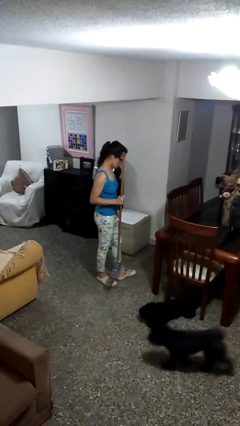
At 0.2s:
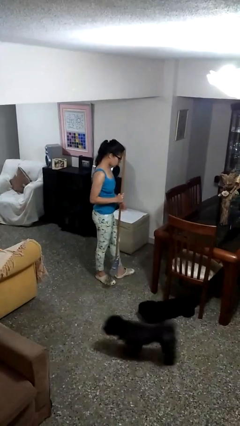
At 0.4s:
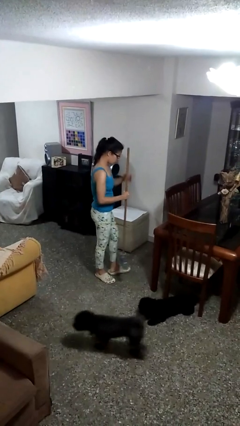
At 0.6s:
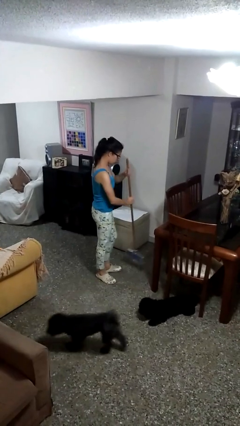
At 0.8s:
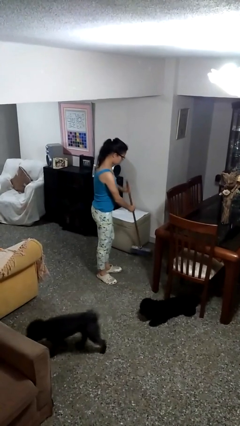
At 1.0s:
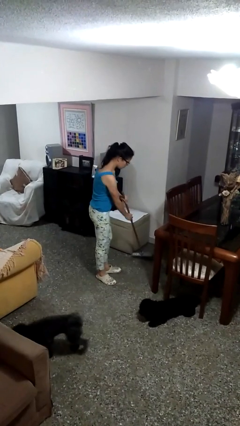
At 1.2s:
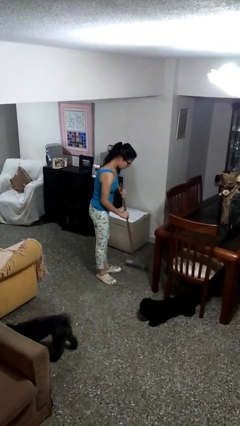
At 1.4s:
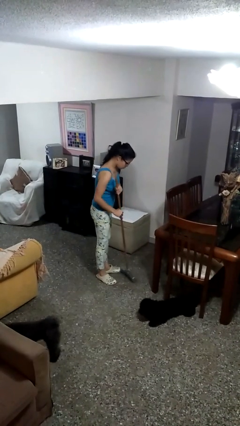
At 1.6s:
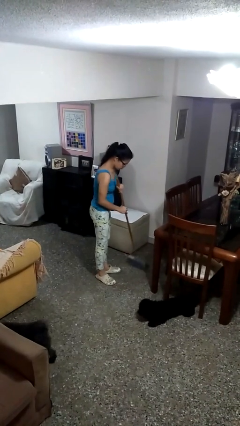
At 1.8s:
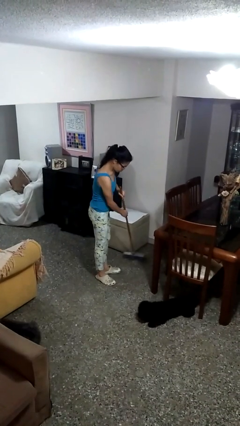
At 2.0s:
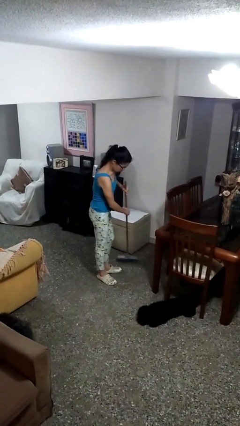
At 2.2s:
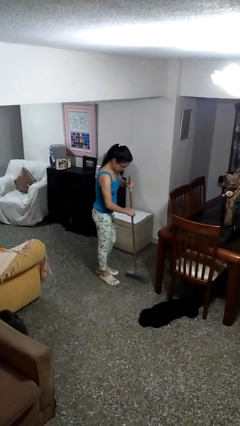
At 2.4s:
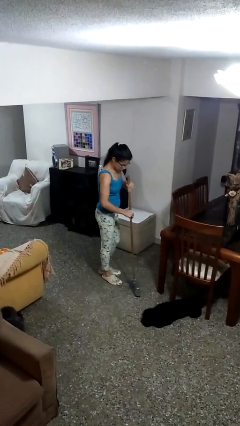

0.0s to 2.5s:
person sweeps floor

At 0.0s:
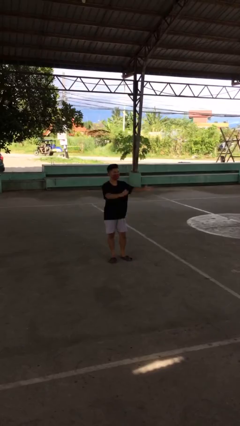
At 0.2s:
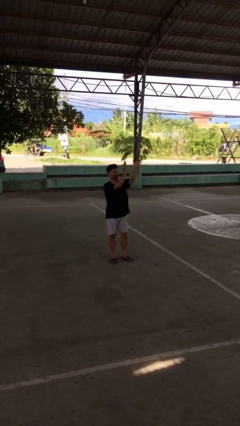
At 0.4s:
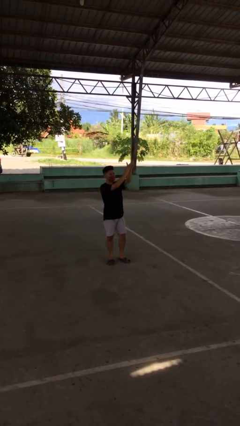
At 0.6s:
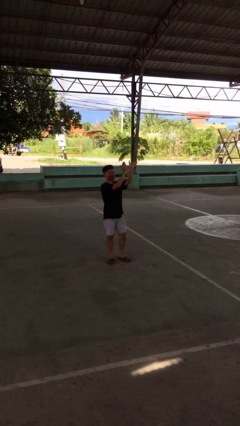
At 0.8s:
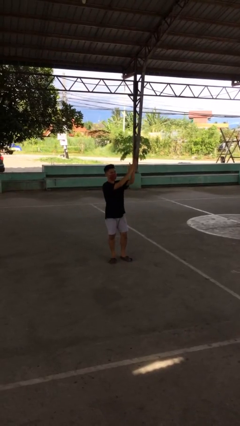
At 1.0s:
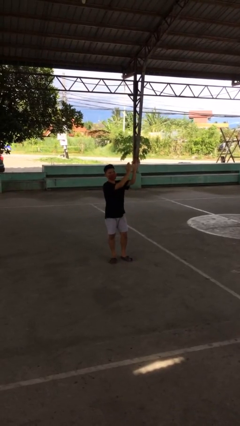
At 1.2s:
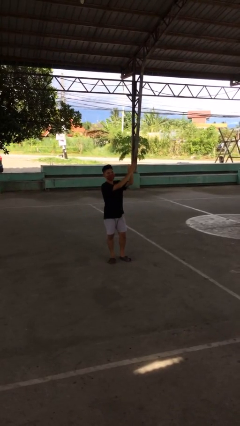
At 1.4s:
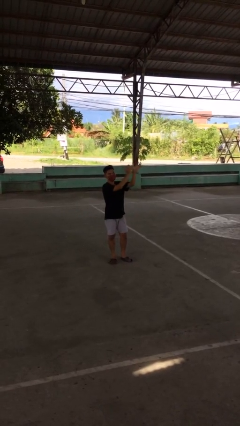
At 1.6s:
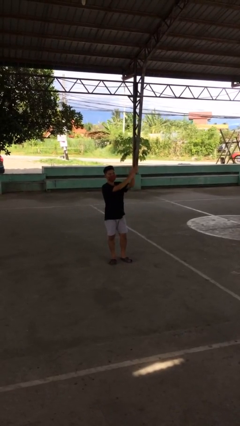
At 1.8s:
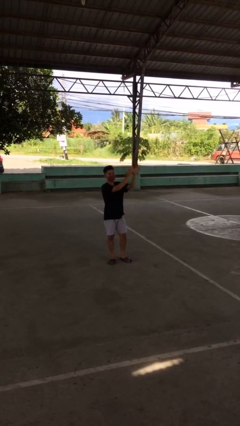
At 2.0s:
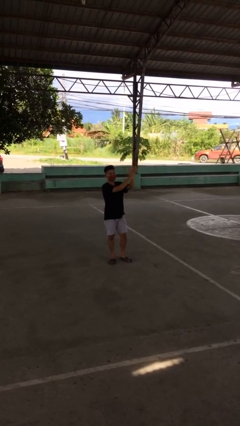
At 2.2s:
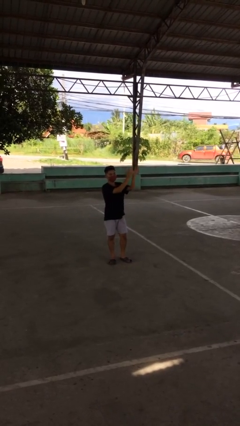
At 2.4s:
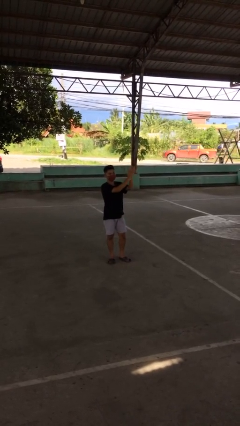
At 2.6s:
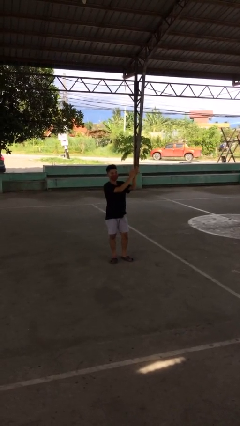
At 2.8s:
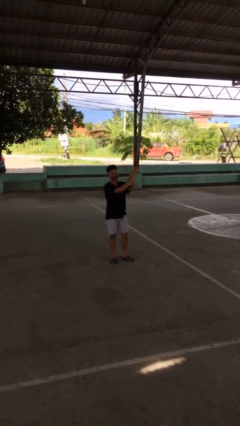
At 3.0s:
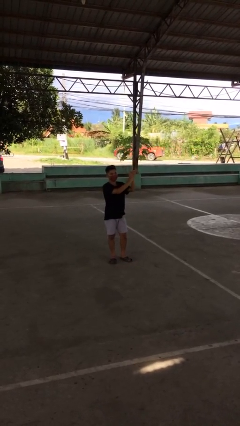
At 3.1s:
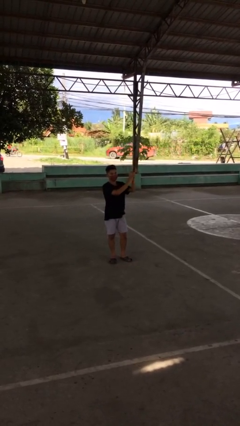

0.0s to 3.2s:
person claps hands

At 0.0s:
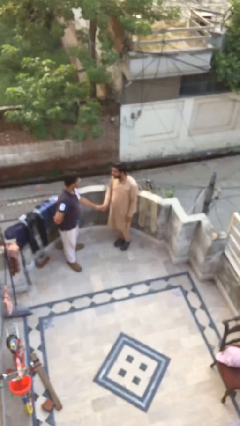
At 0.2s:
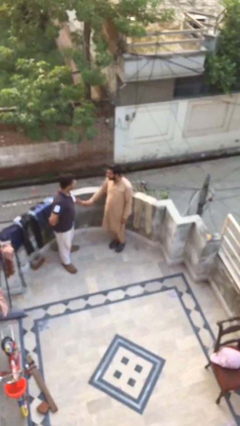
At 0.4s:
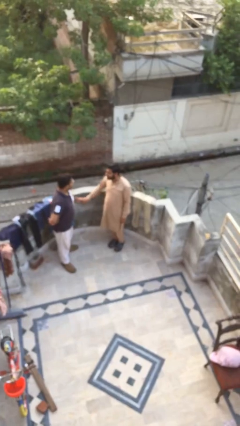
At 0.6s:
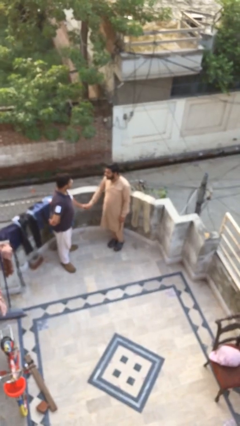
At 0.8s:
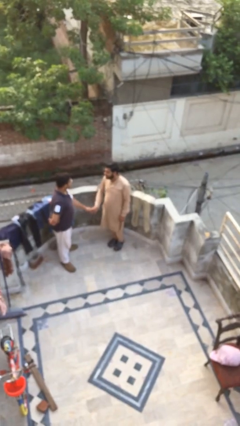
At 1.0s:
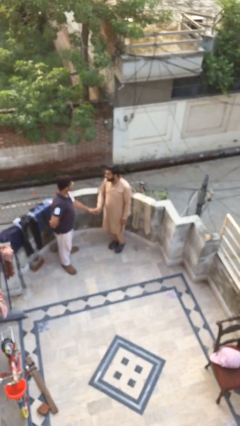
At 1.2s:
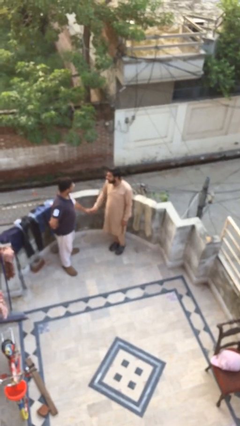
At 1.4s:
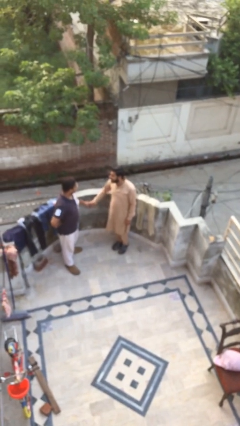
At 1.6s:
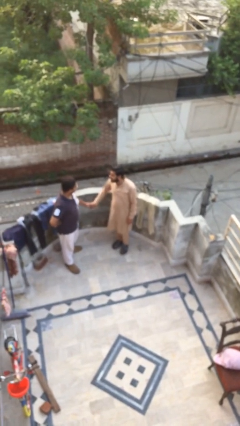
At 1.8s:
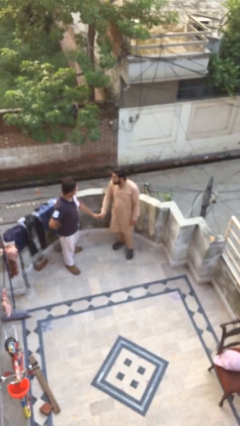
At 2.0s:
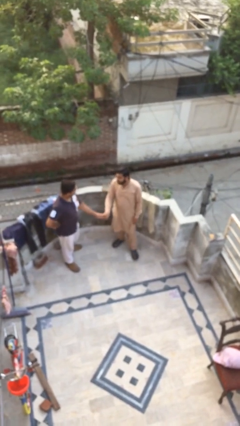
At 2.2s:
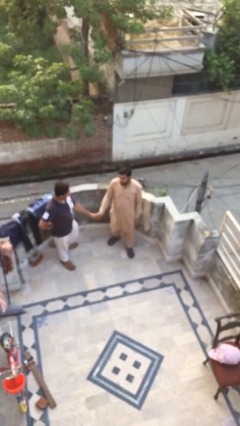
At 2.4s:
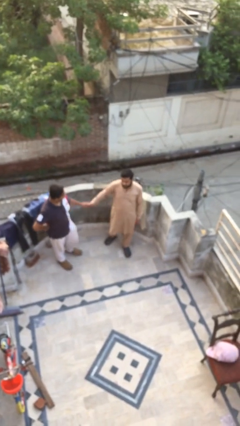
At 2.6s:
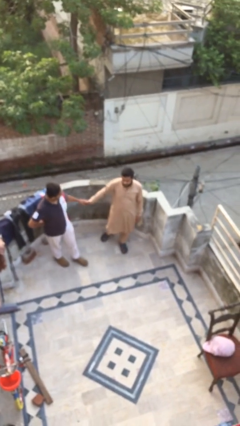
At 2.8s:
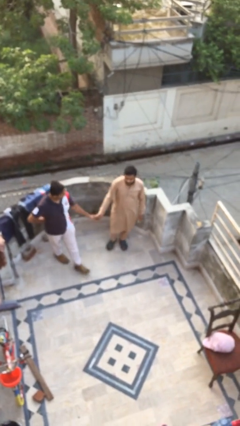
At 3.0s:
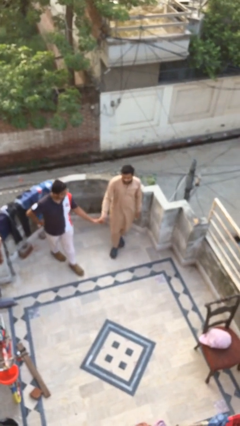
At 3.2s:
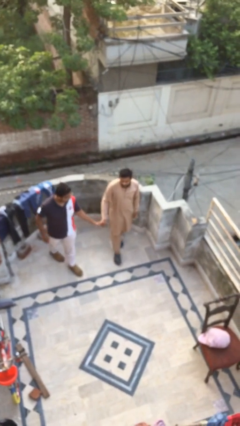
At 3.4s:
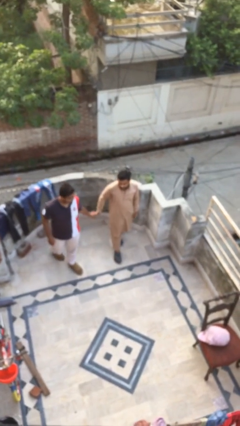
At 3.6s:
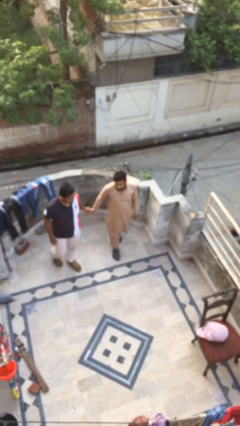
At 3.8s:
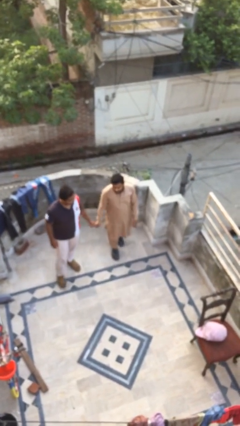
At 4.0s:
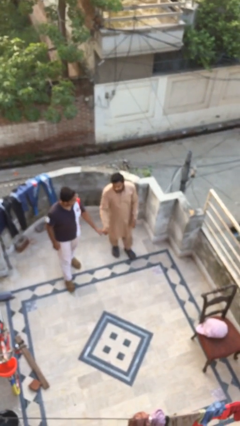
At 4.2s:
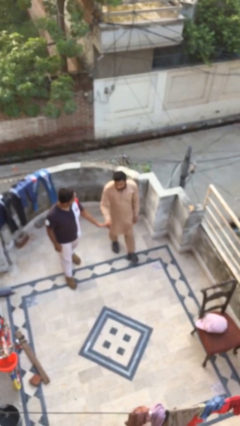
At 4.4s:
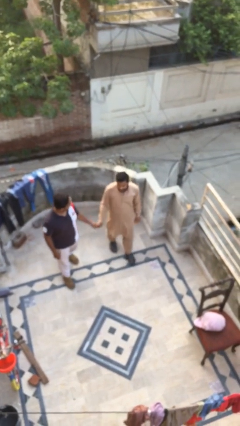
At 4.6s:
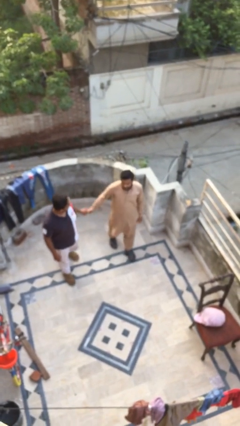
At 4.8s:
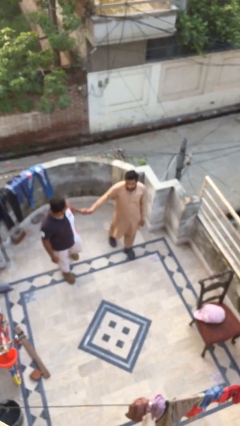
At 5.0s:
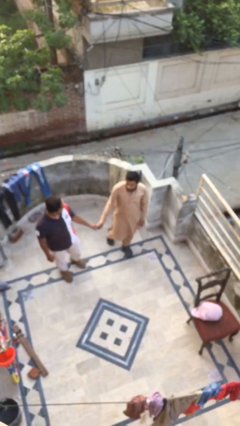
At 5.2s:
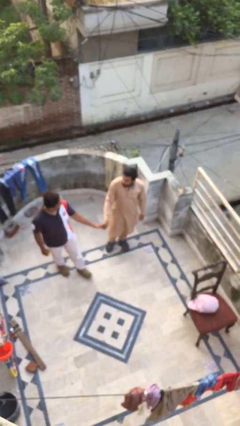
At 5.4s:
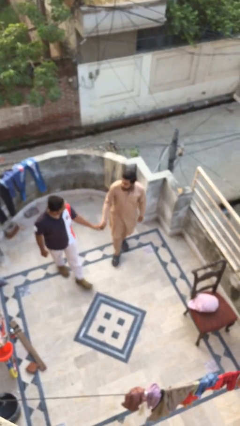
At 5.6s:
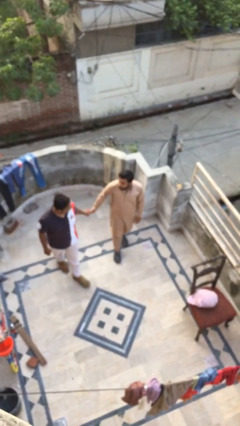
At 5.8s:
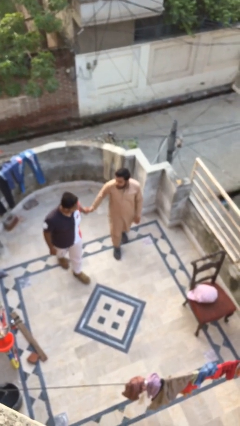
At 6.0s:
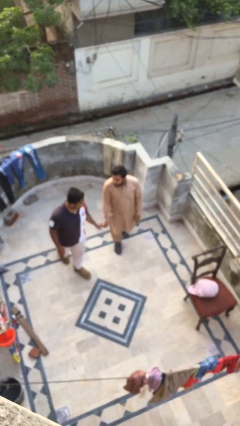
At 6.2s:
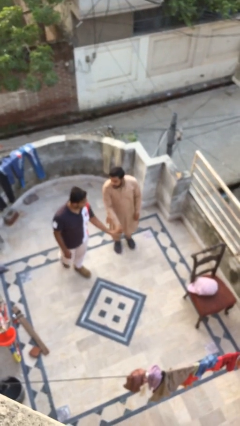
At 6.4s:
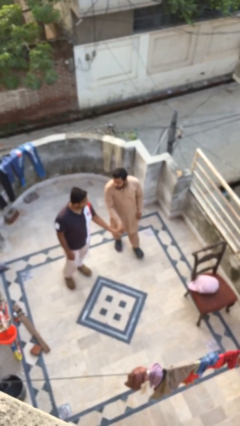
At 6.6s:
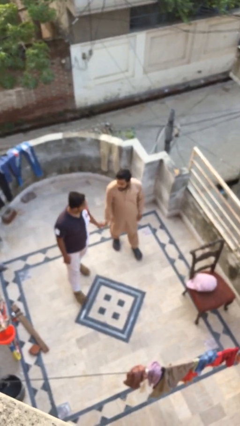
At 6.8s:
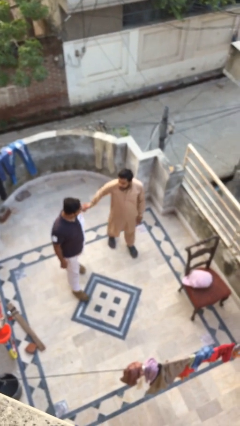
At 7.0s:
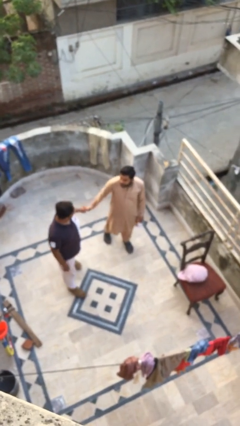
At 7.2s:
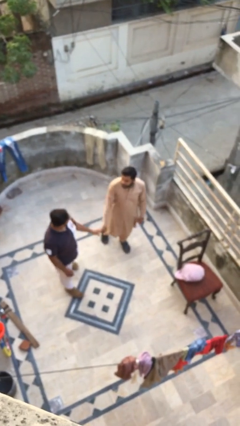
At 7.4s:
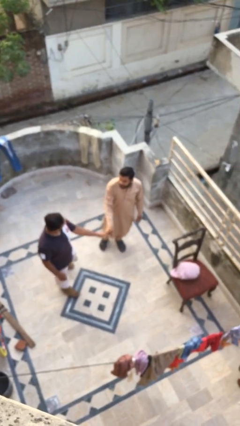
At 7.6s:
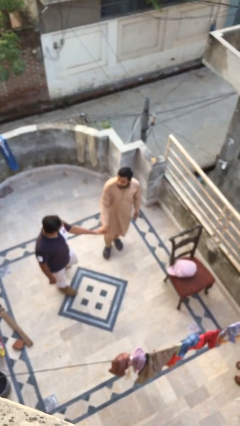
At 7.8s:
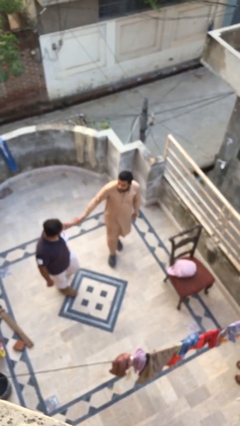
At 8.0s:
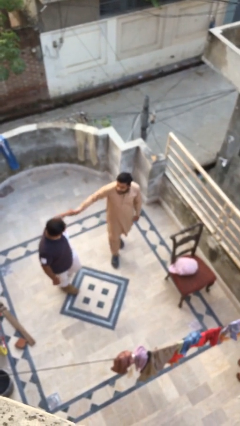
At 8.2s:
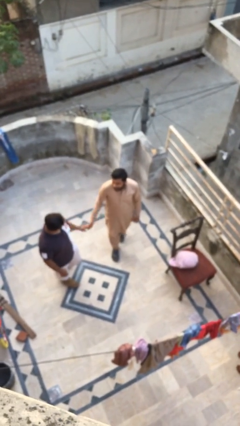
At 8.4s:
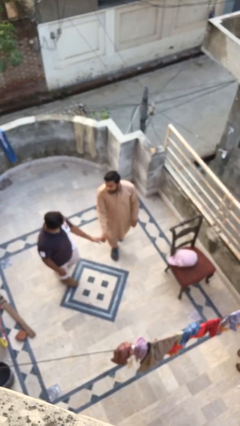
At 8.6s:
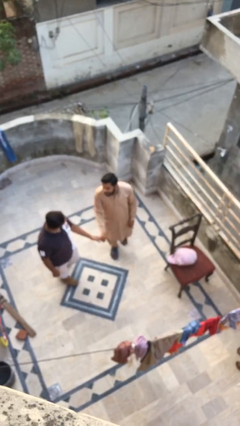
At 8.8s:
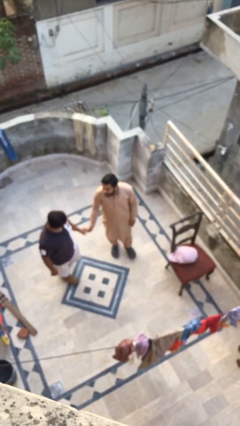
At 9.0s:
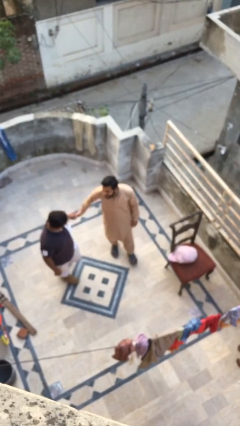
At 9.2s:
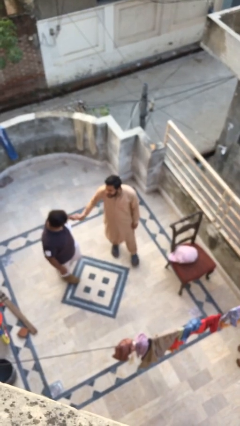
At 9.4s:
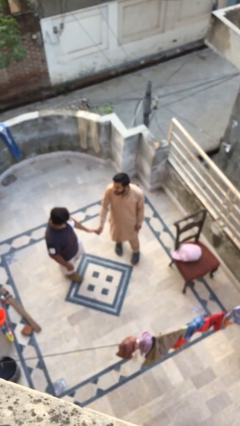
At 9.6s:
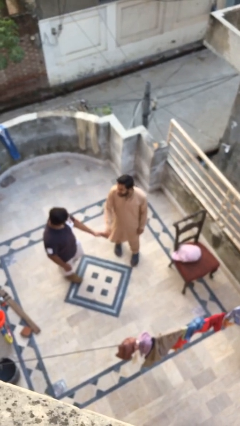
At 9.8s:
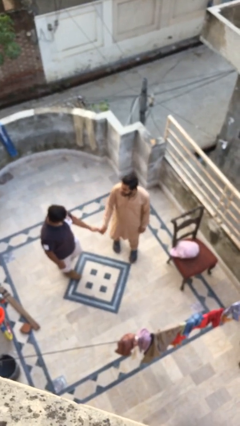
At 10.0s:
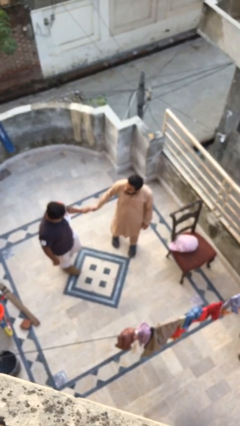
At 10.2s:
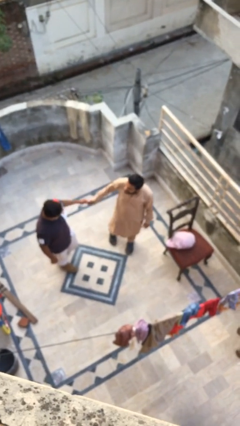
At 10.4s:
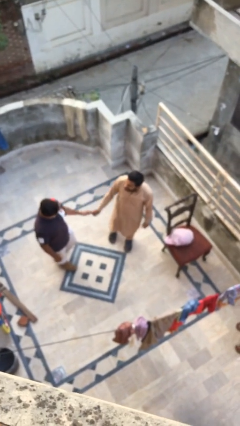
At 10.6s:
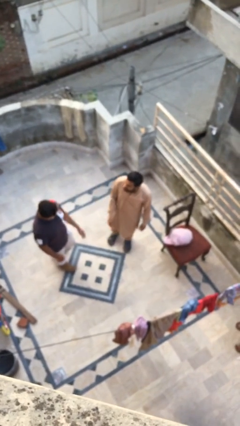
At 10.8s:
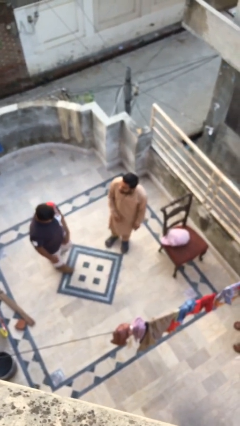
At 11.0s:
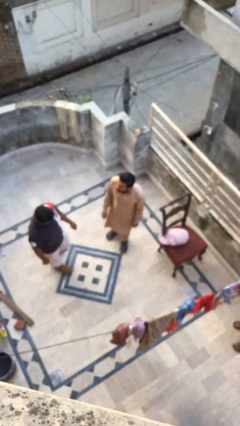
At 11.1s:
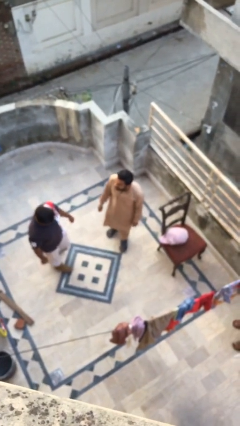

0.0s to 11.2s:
person holds hand

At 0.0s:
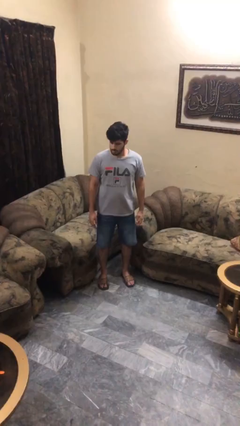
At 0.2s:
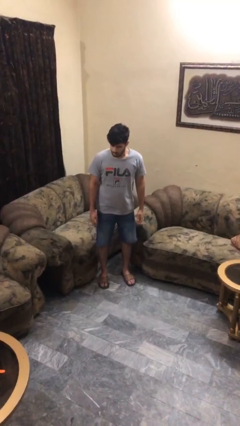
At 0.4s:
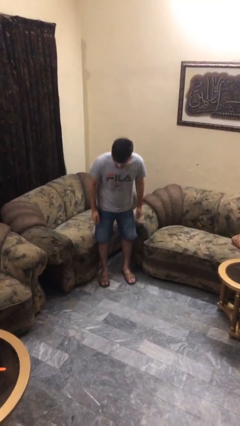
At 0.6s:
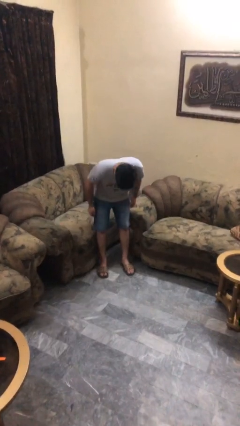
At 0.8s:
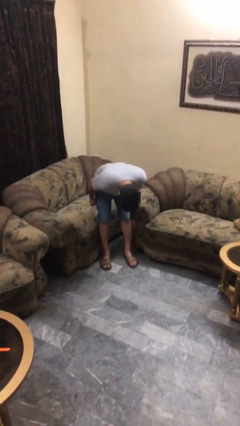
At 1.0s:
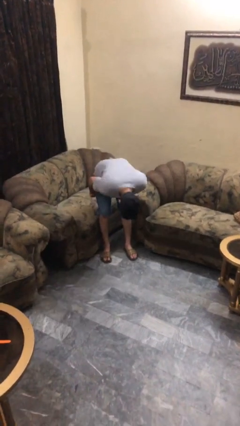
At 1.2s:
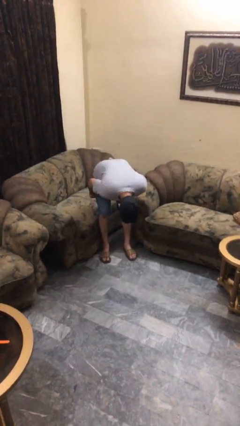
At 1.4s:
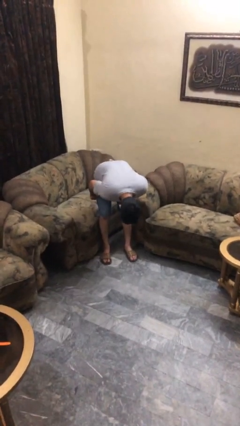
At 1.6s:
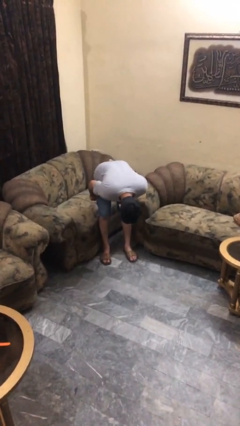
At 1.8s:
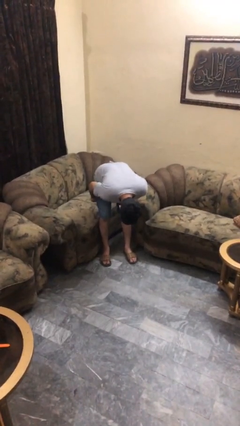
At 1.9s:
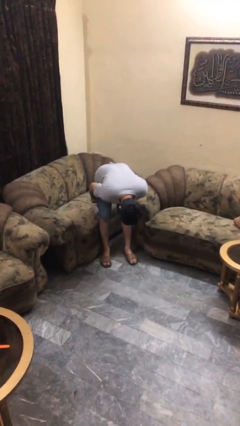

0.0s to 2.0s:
person bows
